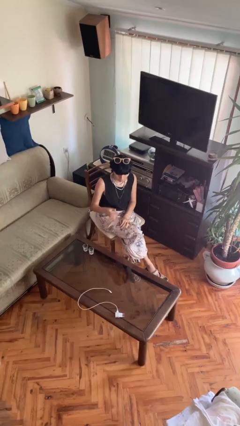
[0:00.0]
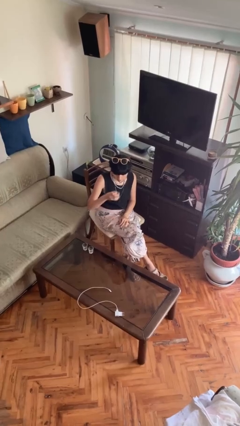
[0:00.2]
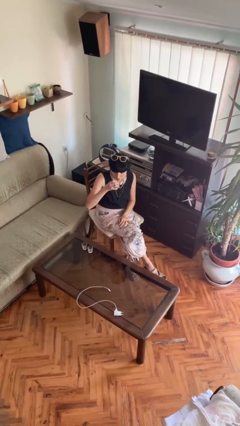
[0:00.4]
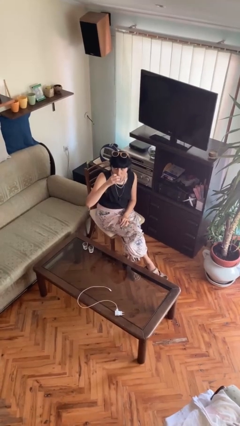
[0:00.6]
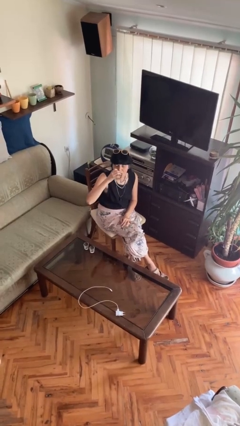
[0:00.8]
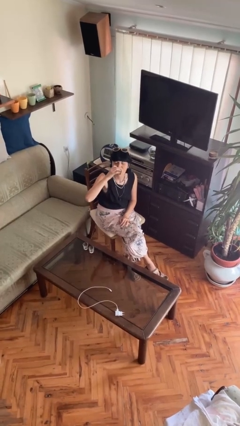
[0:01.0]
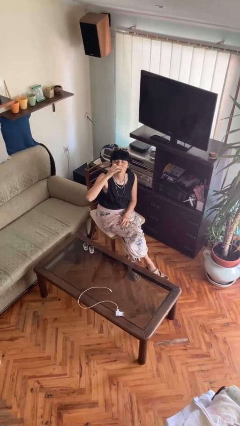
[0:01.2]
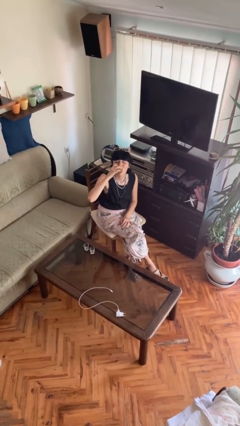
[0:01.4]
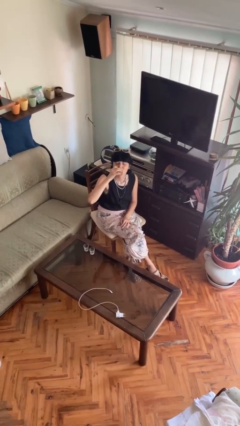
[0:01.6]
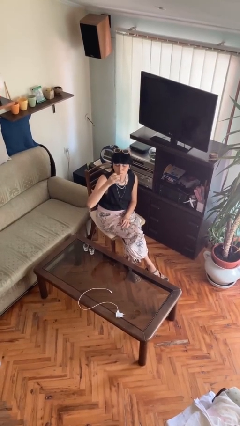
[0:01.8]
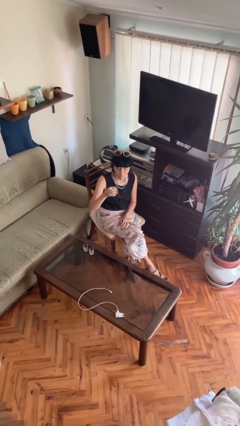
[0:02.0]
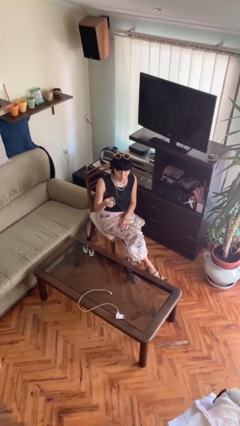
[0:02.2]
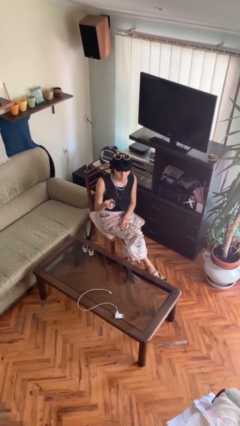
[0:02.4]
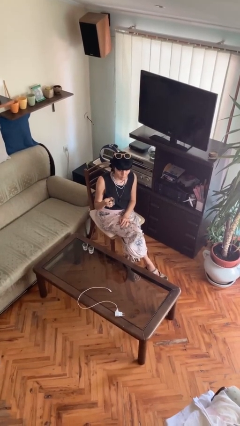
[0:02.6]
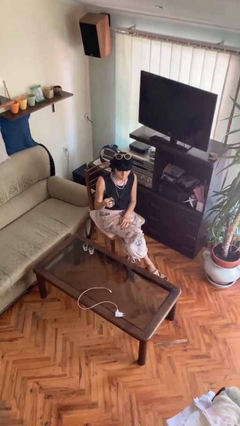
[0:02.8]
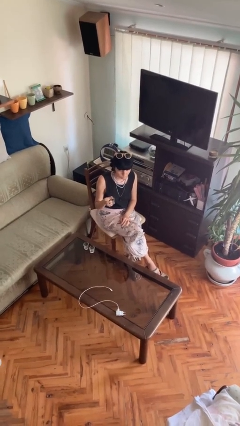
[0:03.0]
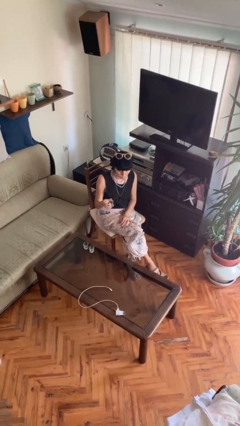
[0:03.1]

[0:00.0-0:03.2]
person drinks from shotglass

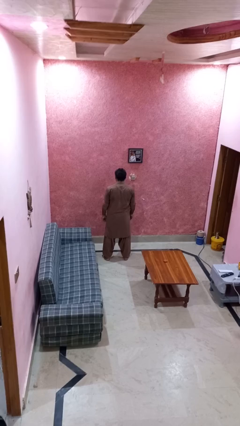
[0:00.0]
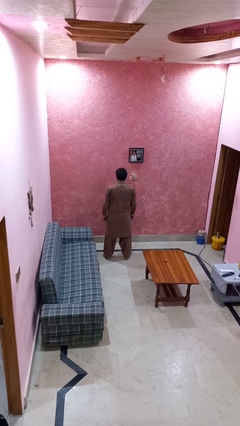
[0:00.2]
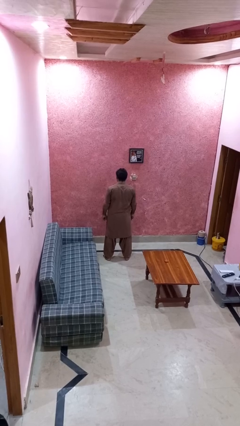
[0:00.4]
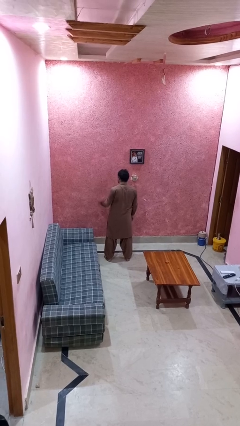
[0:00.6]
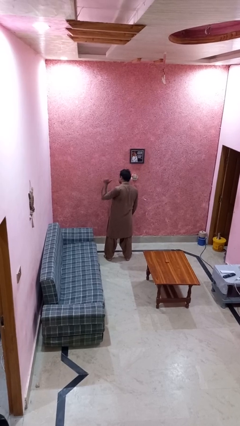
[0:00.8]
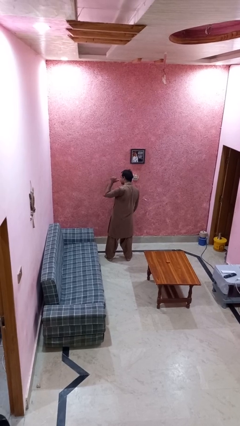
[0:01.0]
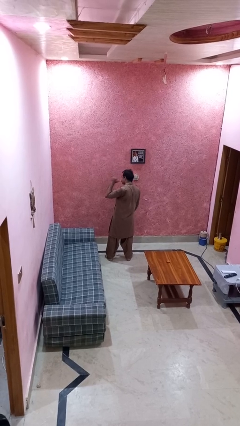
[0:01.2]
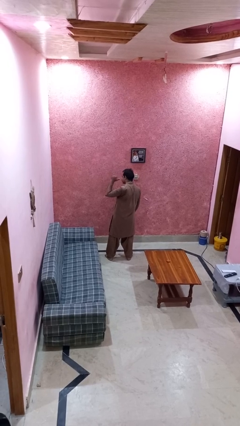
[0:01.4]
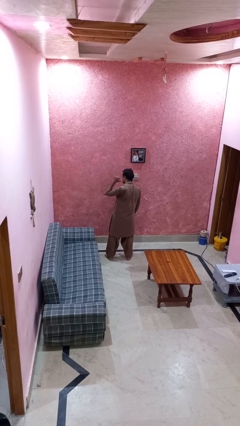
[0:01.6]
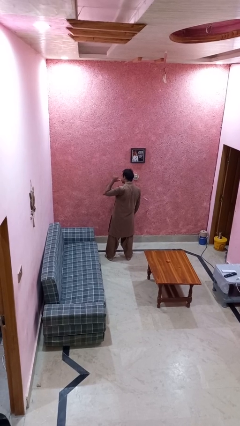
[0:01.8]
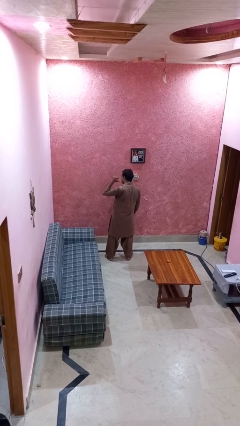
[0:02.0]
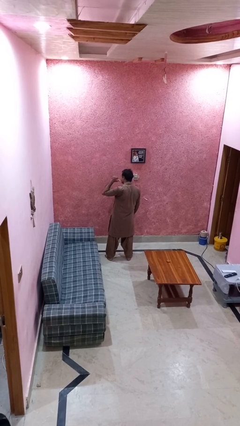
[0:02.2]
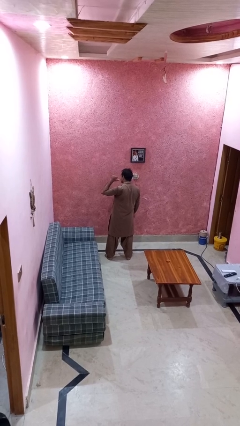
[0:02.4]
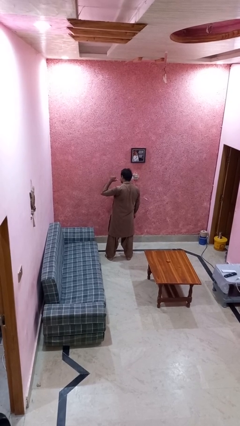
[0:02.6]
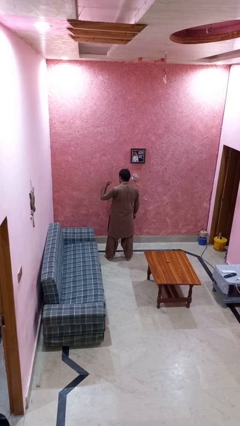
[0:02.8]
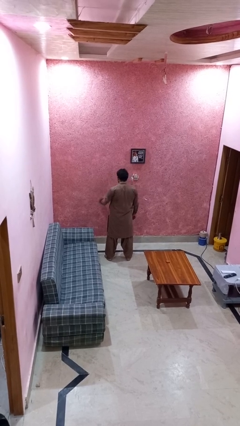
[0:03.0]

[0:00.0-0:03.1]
person gestures behind me

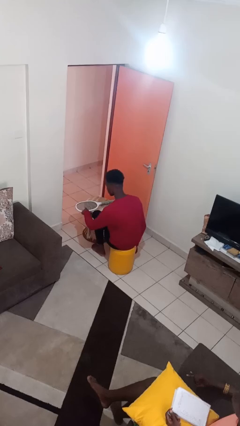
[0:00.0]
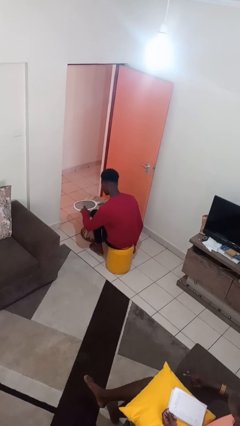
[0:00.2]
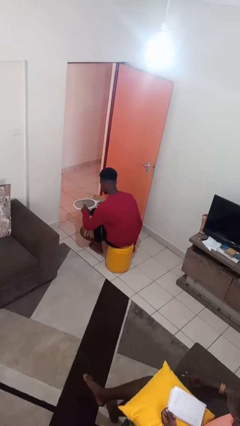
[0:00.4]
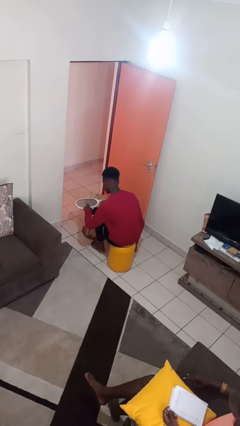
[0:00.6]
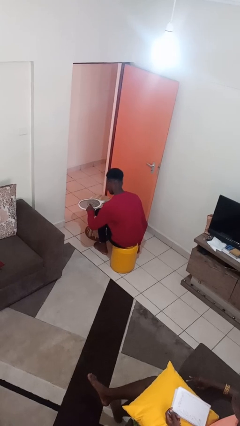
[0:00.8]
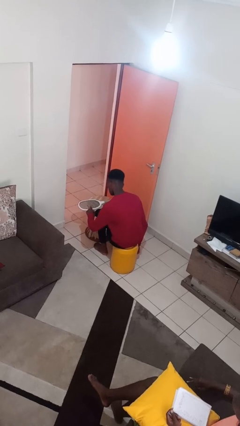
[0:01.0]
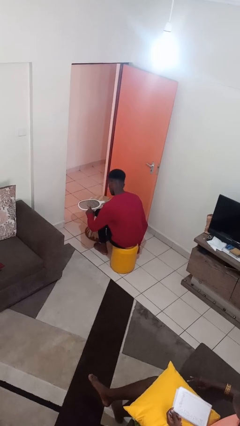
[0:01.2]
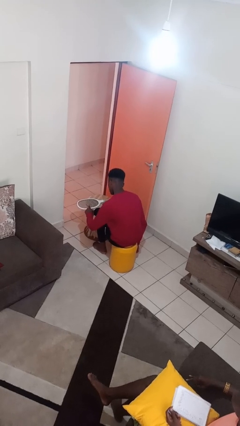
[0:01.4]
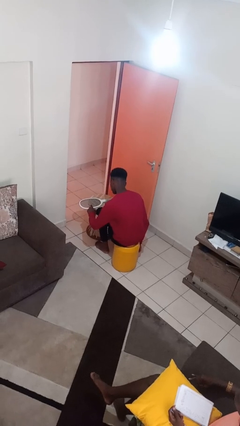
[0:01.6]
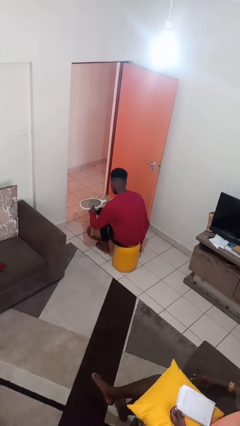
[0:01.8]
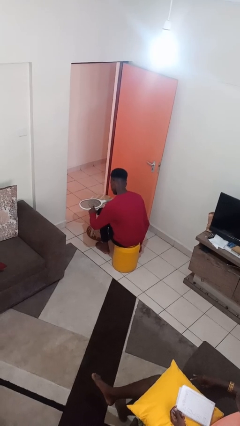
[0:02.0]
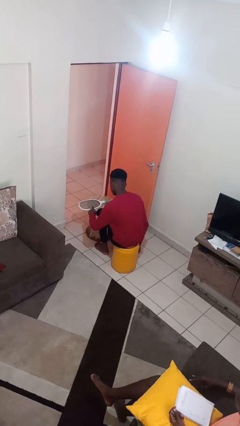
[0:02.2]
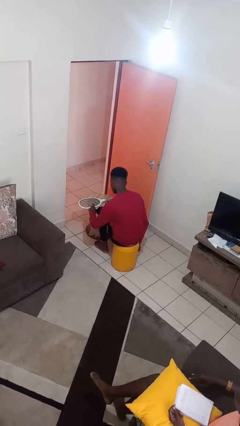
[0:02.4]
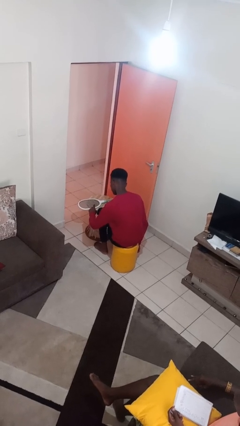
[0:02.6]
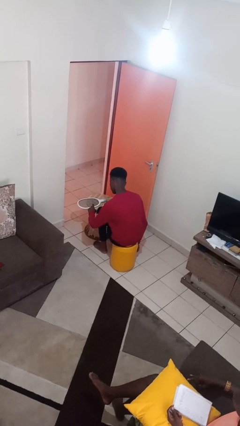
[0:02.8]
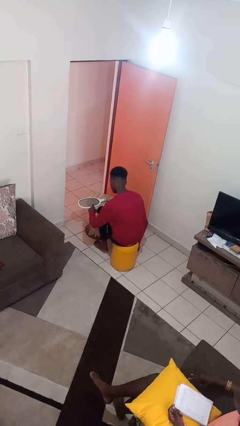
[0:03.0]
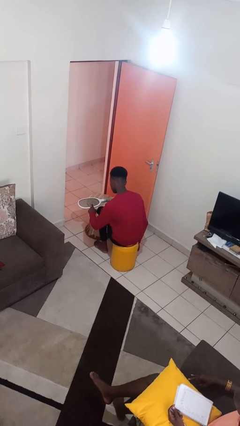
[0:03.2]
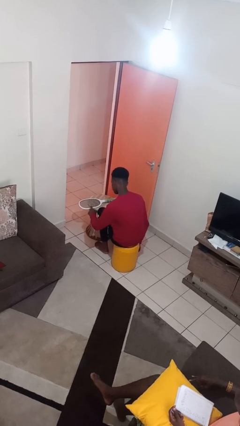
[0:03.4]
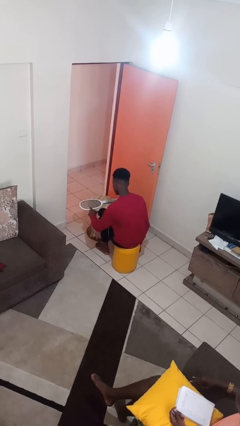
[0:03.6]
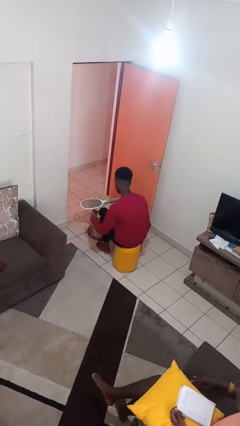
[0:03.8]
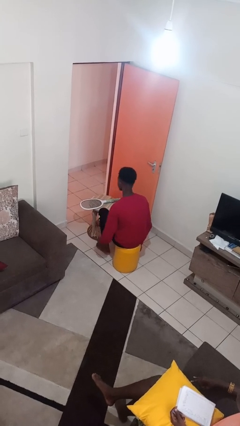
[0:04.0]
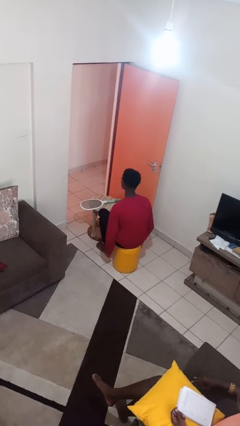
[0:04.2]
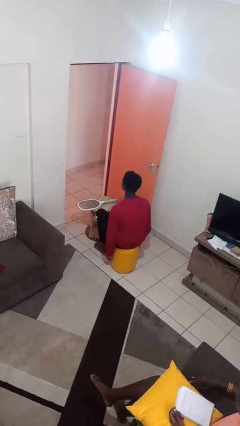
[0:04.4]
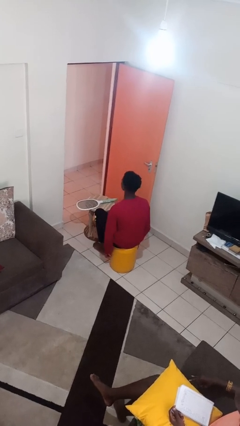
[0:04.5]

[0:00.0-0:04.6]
person taps object with finger

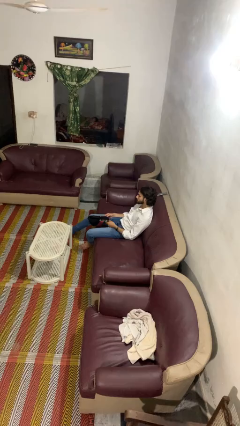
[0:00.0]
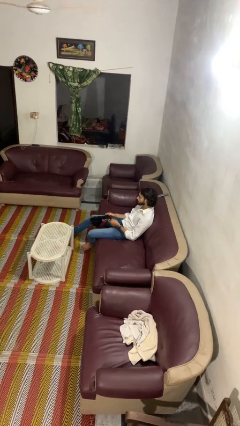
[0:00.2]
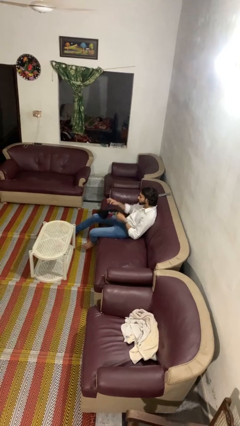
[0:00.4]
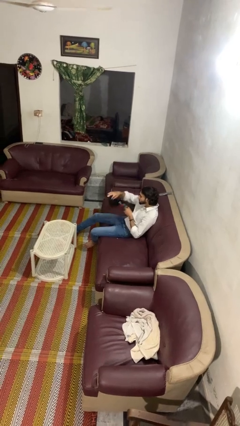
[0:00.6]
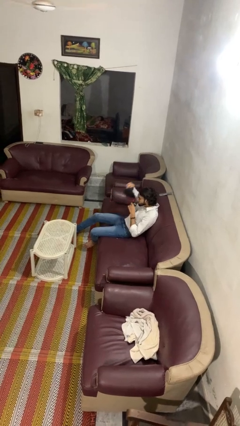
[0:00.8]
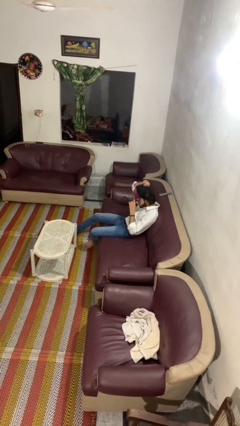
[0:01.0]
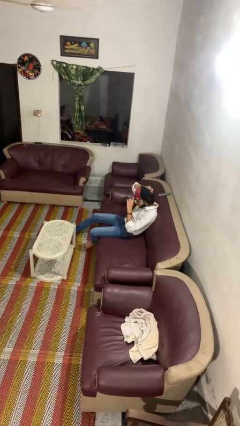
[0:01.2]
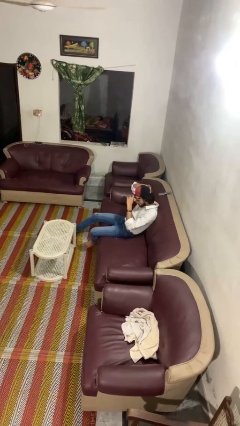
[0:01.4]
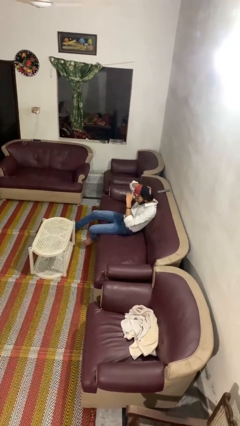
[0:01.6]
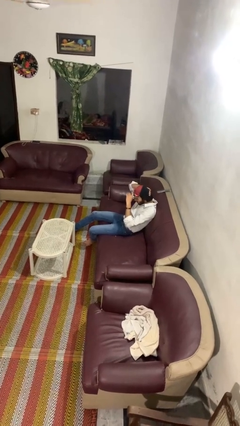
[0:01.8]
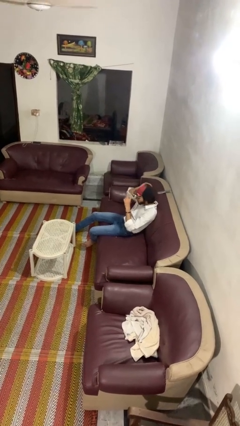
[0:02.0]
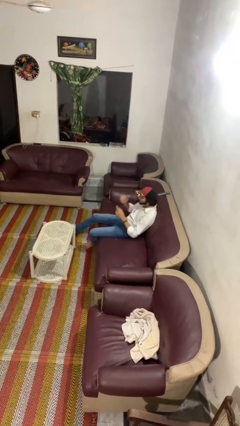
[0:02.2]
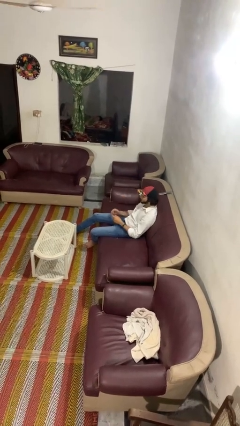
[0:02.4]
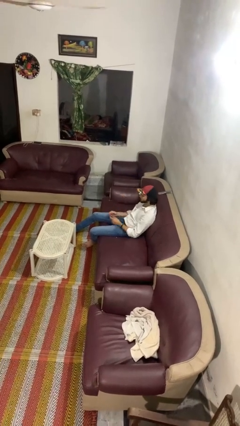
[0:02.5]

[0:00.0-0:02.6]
person puts on hat

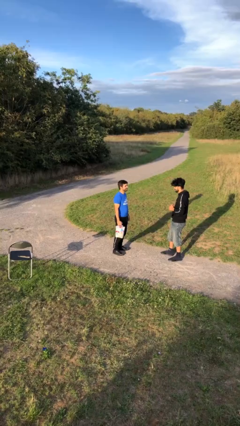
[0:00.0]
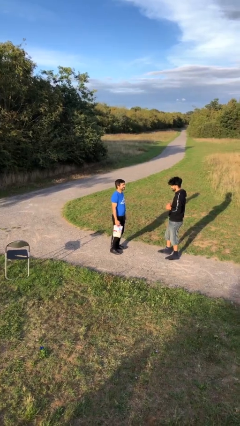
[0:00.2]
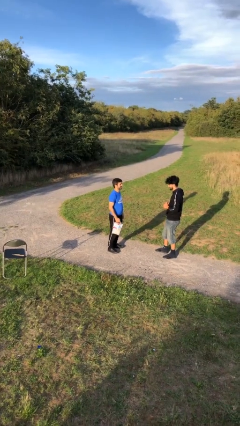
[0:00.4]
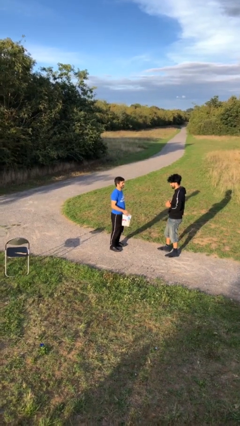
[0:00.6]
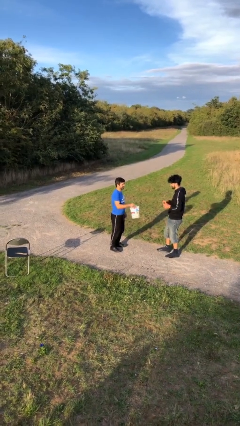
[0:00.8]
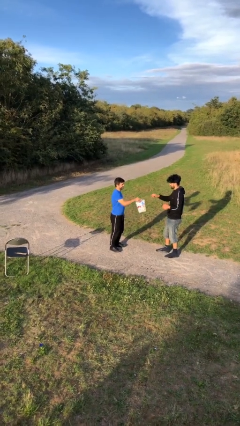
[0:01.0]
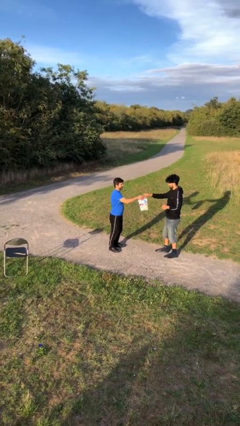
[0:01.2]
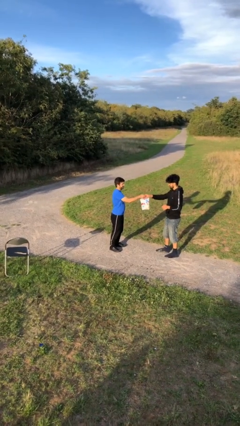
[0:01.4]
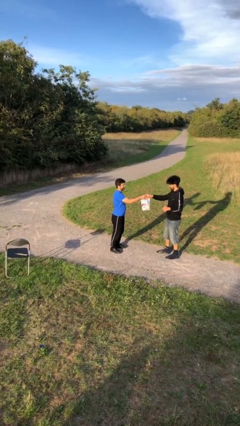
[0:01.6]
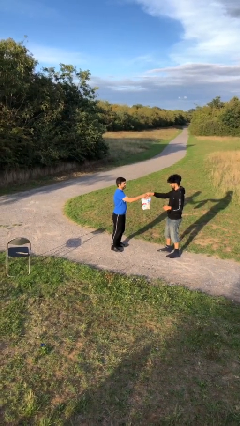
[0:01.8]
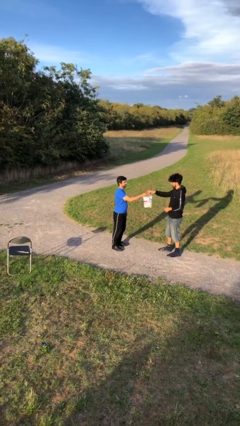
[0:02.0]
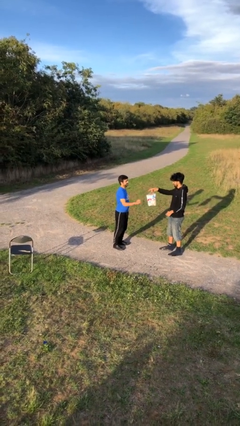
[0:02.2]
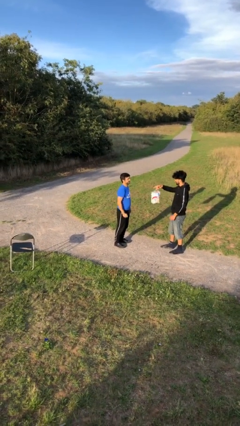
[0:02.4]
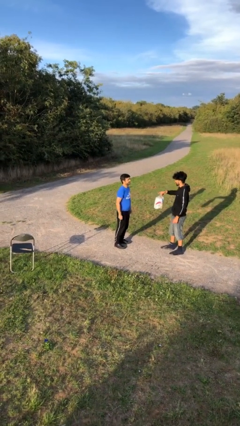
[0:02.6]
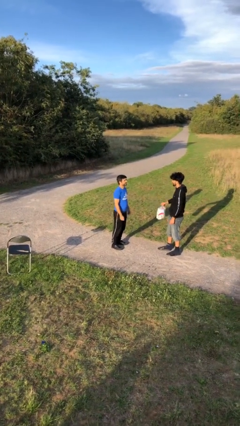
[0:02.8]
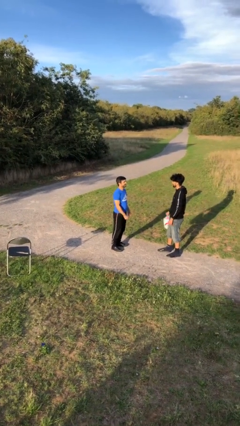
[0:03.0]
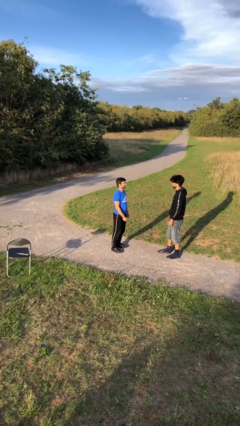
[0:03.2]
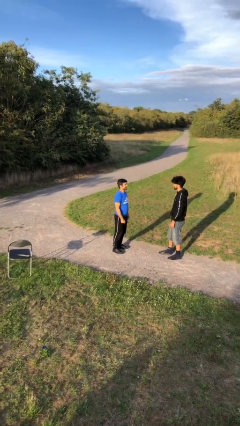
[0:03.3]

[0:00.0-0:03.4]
person transfers object to person

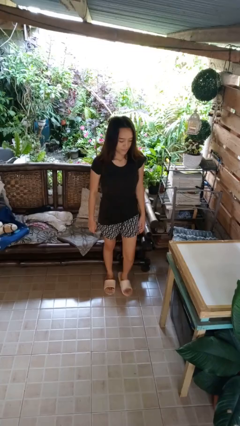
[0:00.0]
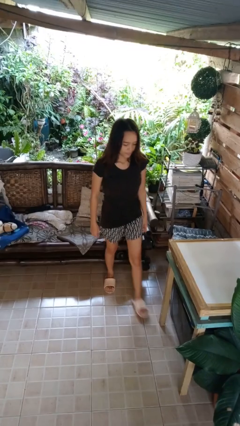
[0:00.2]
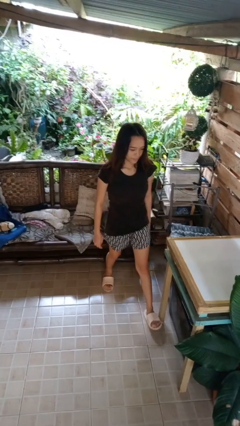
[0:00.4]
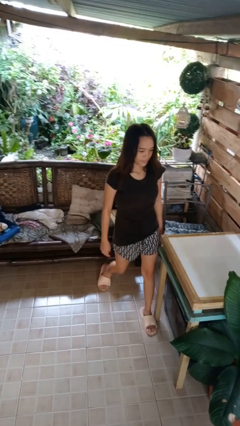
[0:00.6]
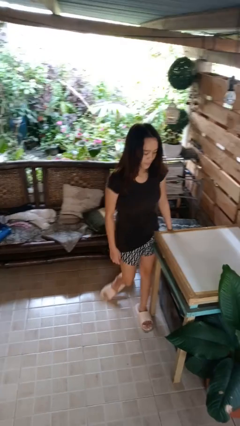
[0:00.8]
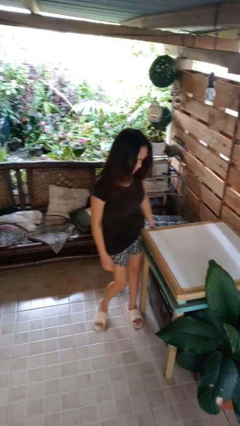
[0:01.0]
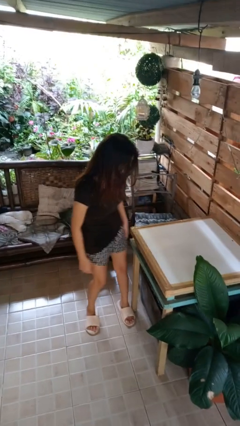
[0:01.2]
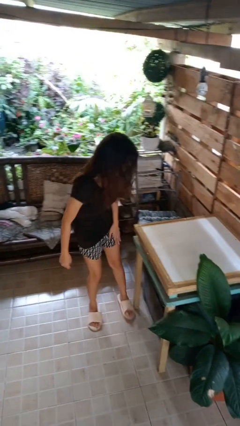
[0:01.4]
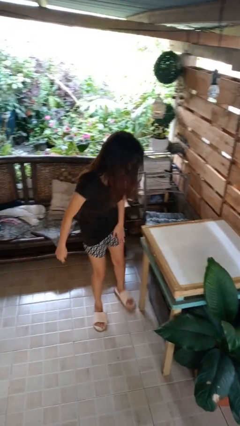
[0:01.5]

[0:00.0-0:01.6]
person bumps into table
